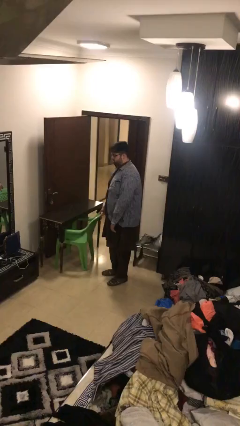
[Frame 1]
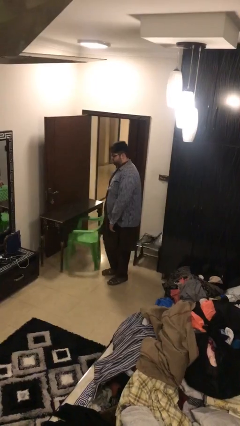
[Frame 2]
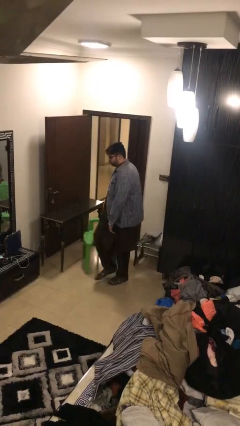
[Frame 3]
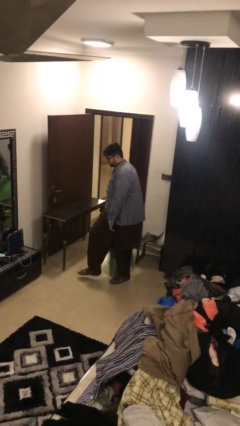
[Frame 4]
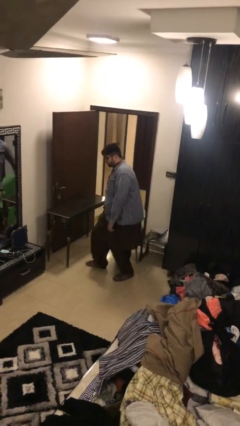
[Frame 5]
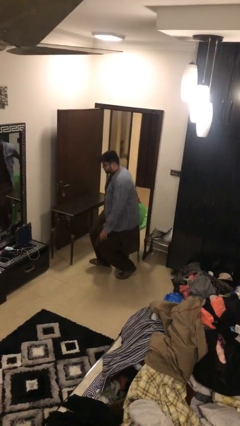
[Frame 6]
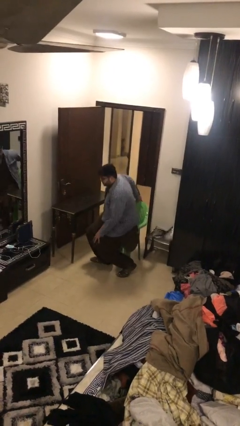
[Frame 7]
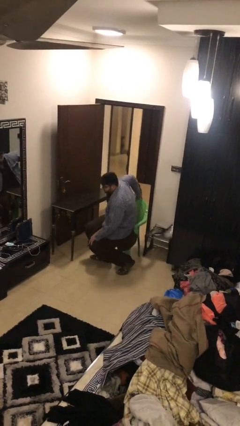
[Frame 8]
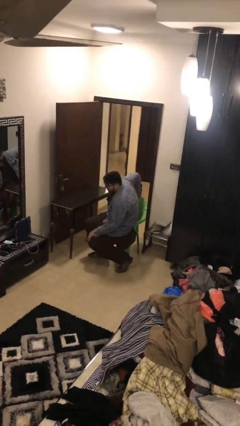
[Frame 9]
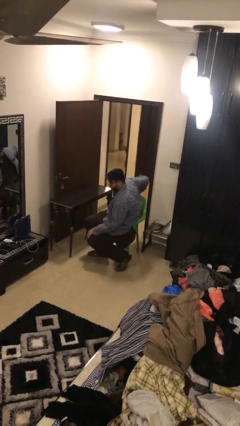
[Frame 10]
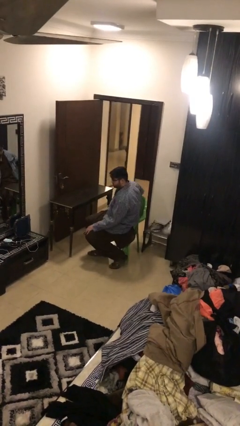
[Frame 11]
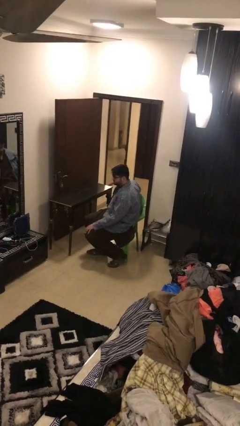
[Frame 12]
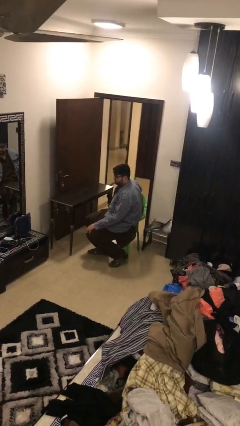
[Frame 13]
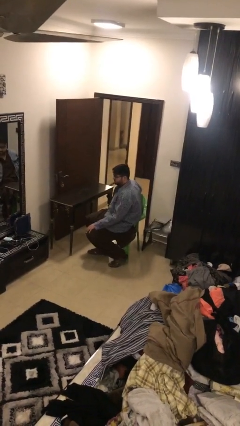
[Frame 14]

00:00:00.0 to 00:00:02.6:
person sits down

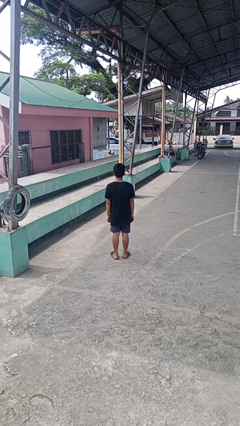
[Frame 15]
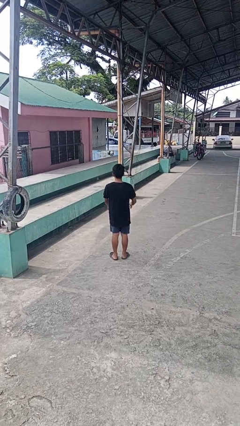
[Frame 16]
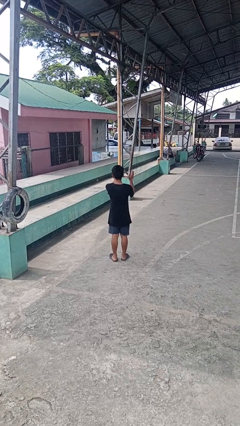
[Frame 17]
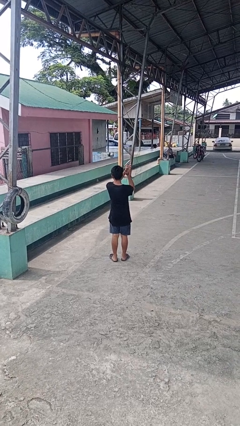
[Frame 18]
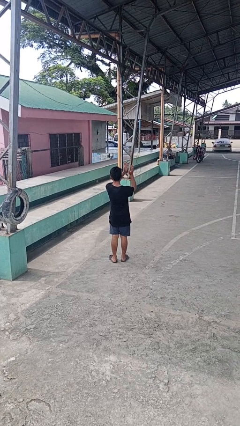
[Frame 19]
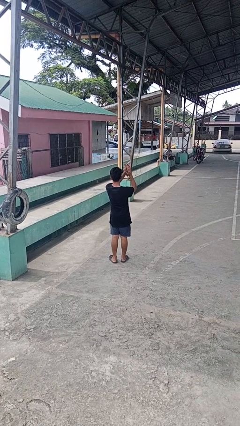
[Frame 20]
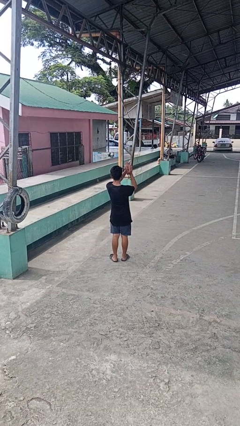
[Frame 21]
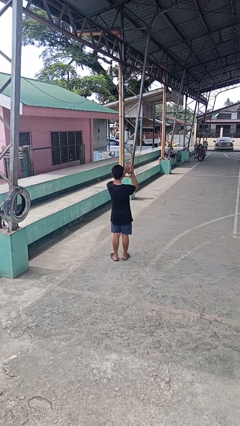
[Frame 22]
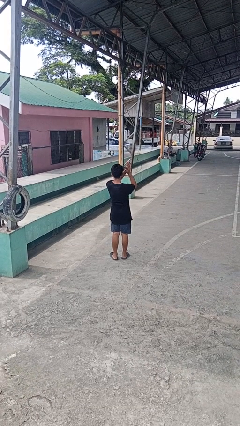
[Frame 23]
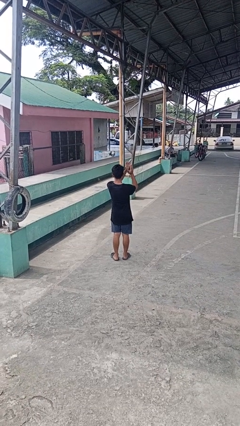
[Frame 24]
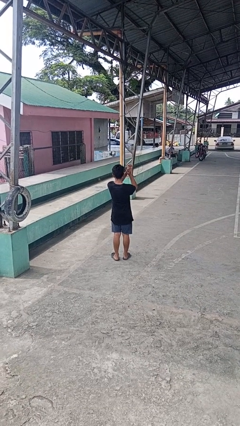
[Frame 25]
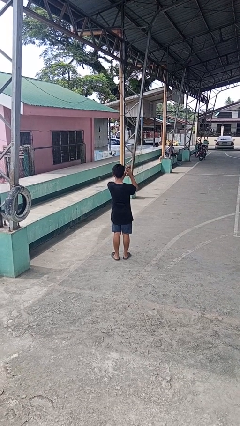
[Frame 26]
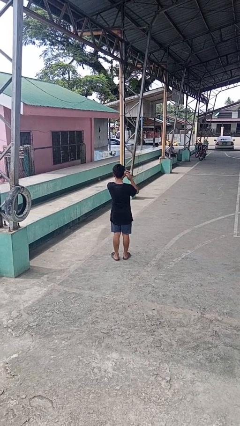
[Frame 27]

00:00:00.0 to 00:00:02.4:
person claps hands

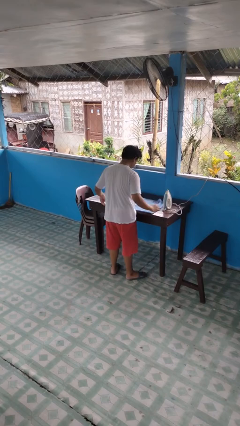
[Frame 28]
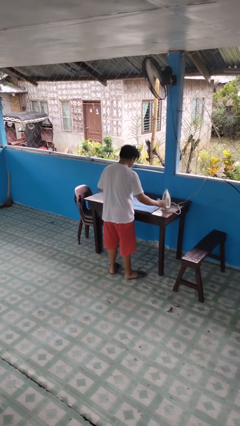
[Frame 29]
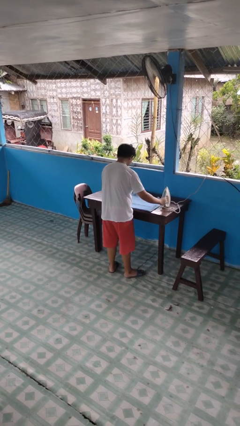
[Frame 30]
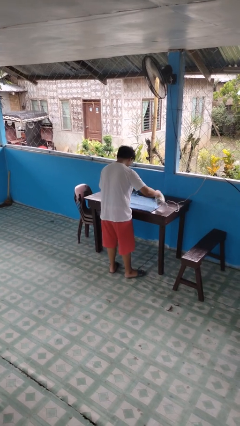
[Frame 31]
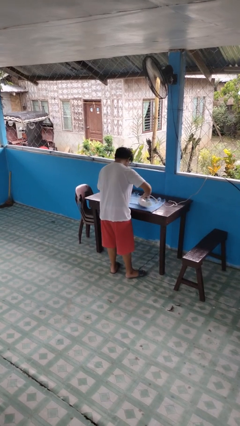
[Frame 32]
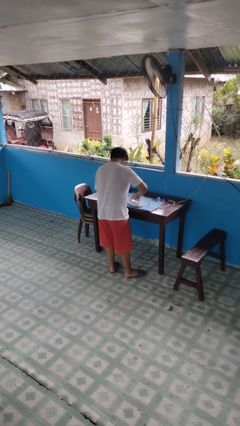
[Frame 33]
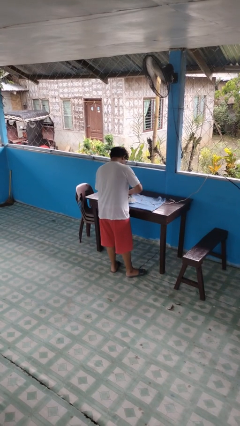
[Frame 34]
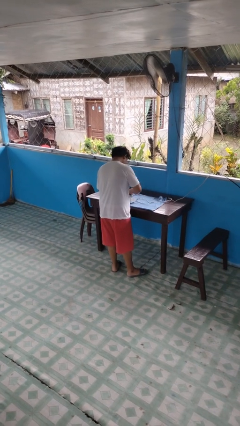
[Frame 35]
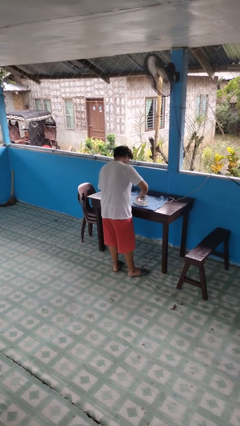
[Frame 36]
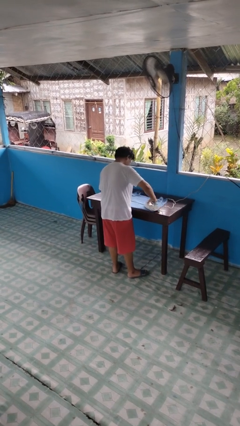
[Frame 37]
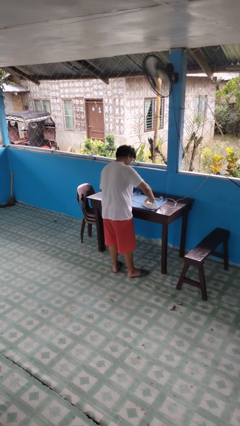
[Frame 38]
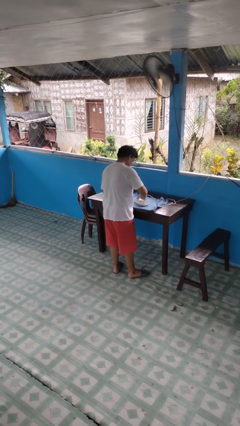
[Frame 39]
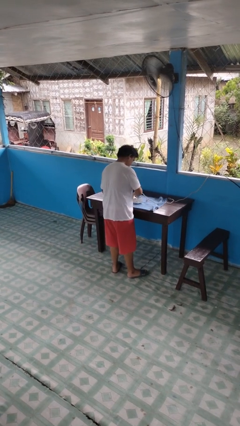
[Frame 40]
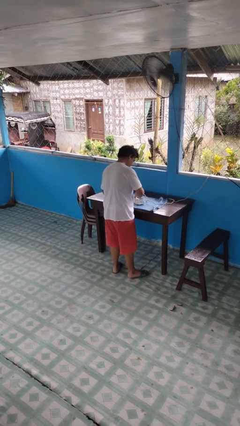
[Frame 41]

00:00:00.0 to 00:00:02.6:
person irons clothes

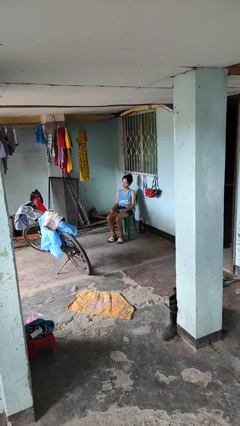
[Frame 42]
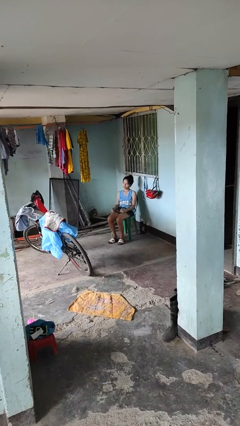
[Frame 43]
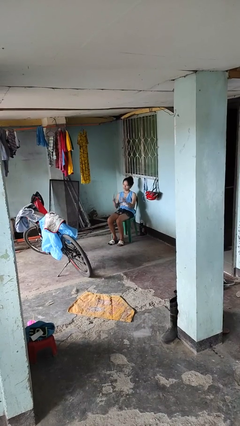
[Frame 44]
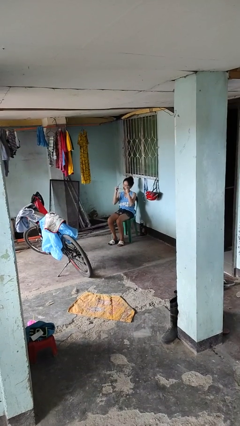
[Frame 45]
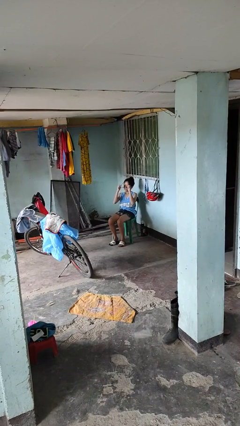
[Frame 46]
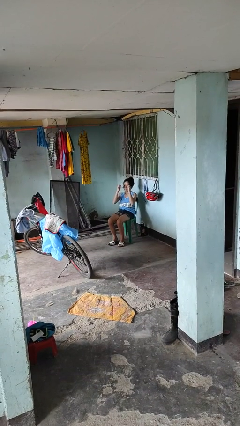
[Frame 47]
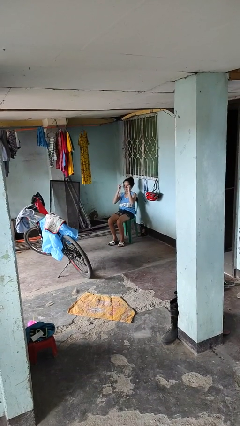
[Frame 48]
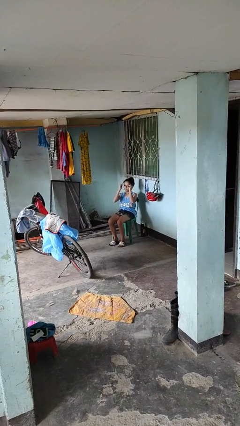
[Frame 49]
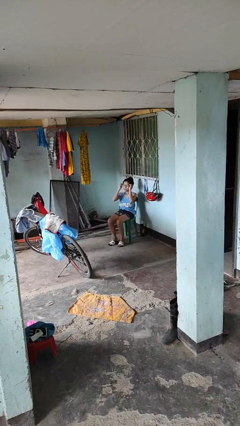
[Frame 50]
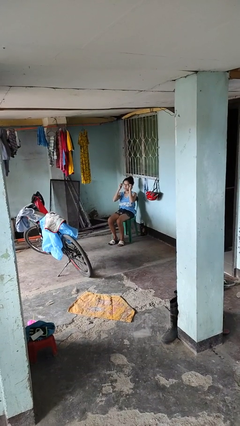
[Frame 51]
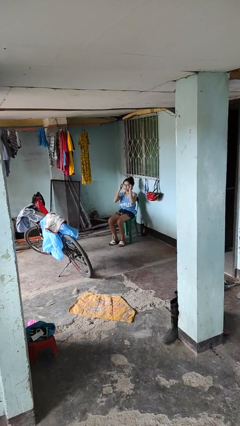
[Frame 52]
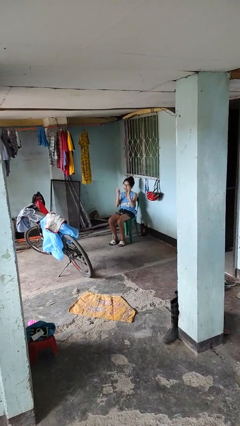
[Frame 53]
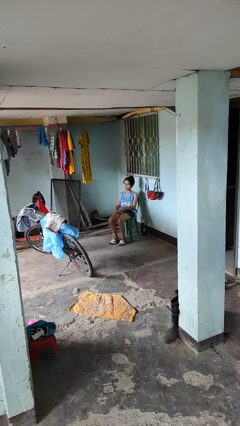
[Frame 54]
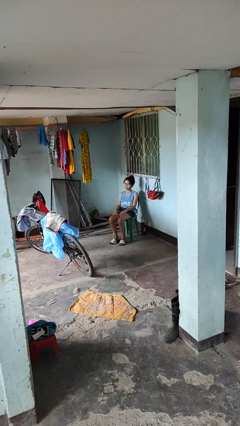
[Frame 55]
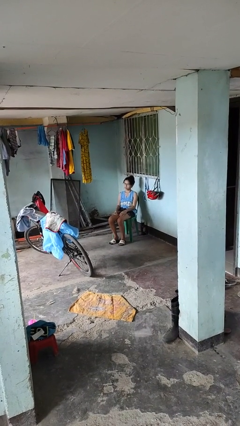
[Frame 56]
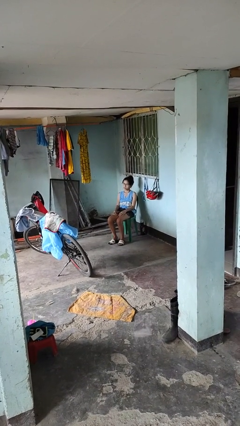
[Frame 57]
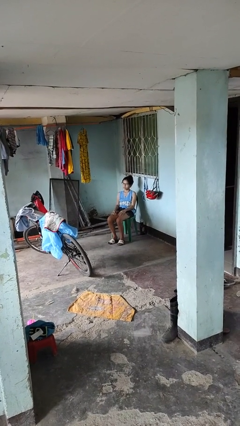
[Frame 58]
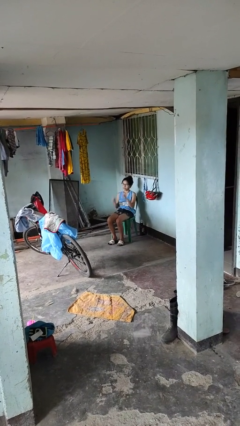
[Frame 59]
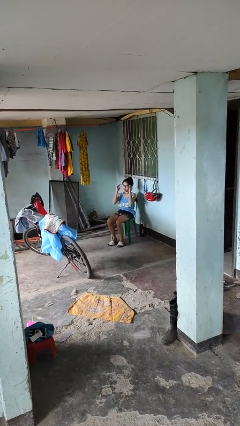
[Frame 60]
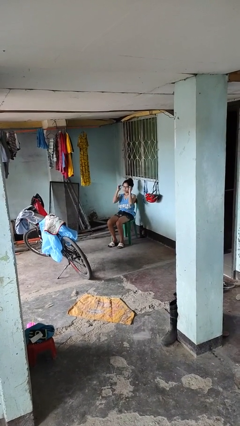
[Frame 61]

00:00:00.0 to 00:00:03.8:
person puts on glasses

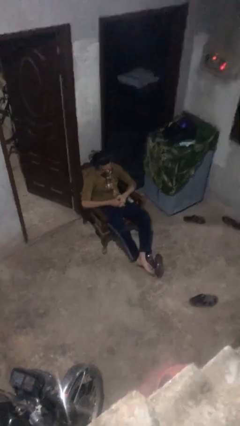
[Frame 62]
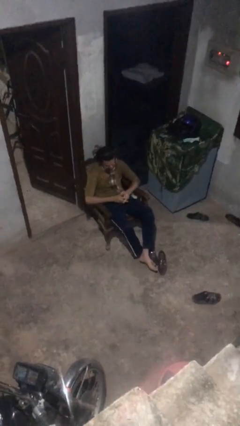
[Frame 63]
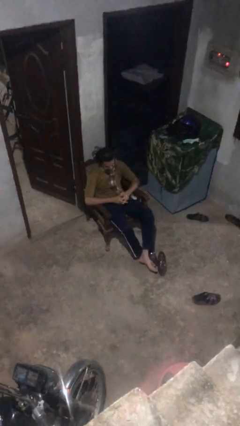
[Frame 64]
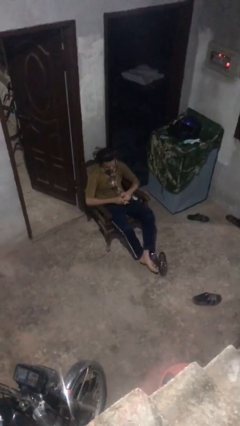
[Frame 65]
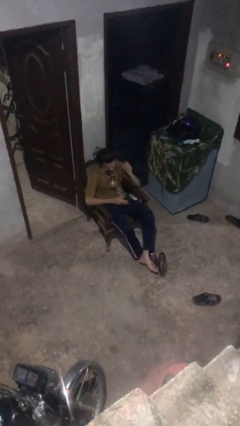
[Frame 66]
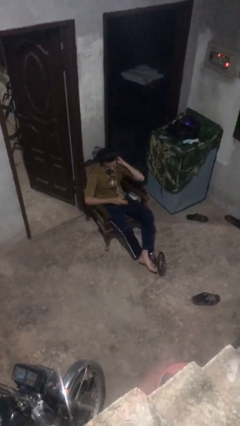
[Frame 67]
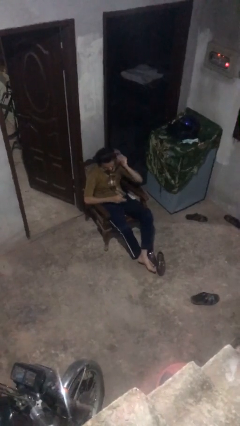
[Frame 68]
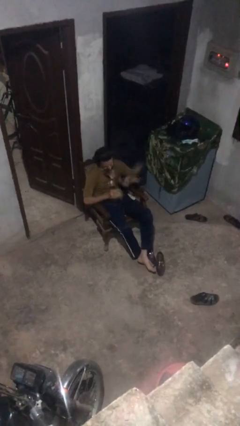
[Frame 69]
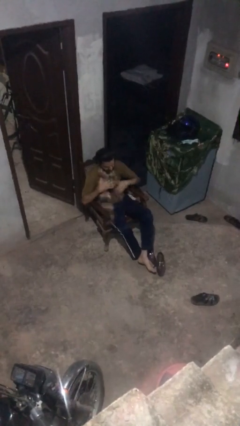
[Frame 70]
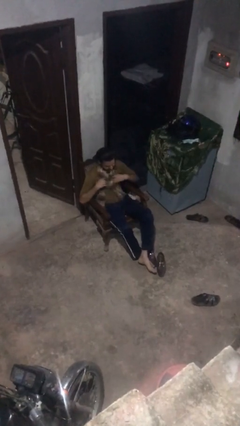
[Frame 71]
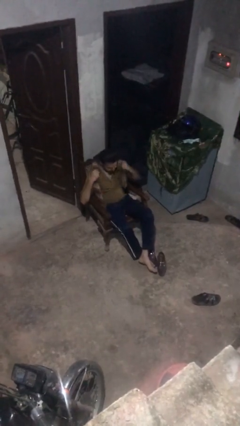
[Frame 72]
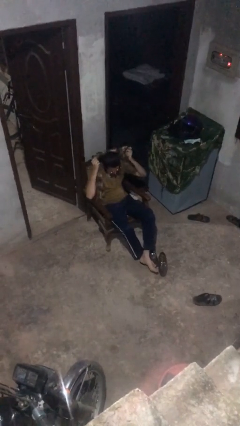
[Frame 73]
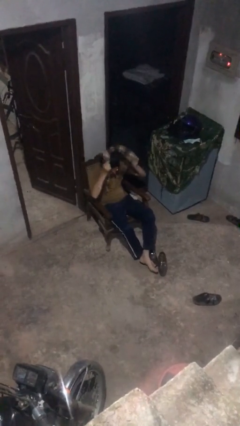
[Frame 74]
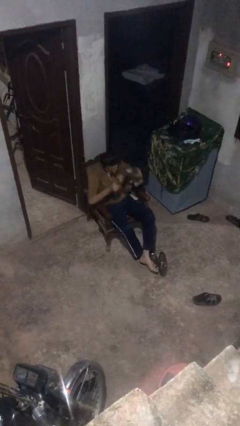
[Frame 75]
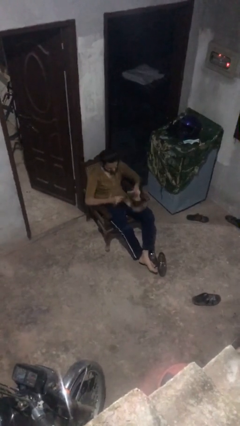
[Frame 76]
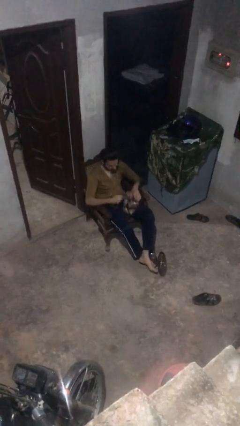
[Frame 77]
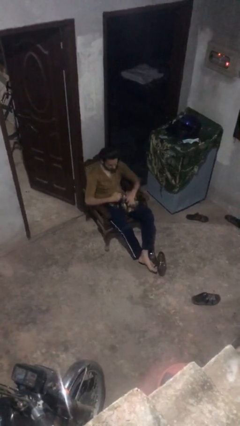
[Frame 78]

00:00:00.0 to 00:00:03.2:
person takes off scarf

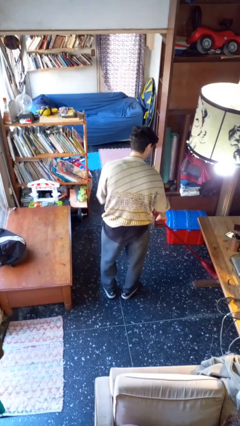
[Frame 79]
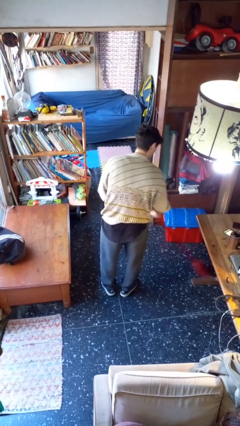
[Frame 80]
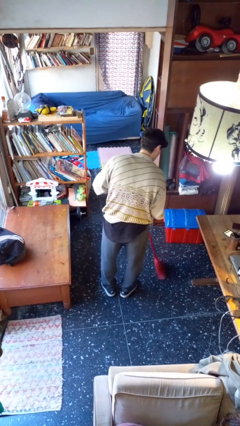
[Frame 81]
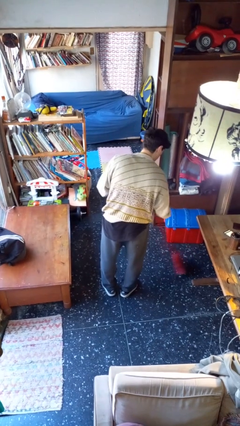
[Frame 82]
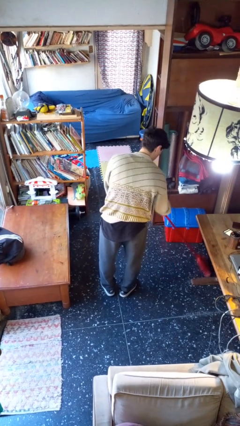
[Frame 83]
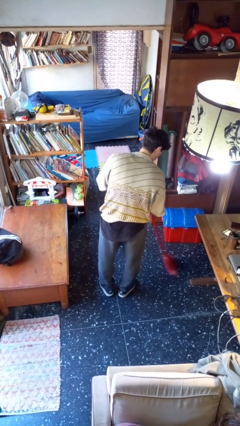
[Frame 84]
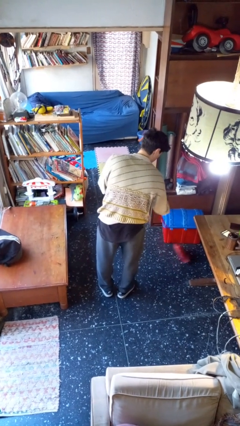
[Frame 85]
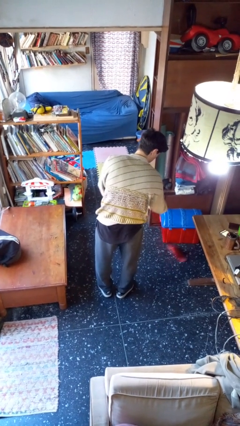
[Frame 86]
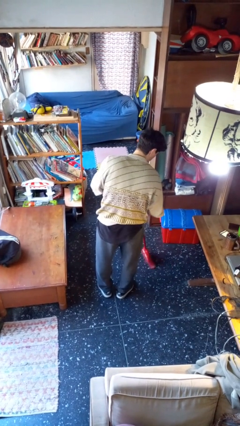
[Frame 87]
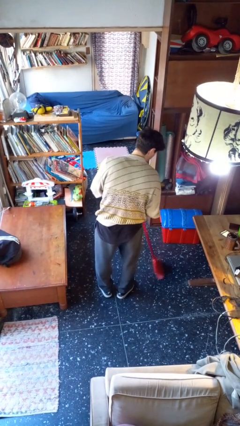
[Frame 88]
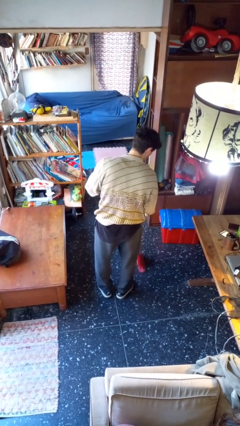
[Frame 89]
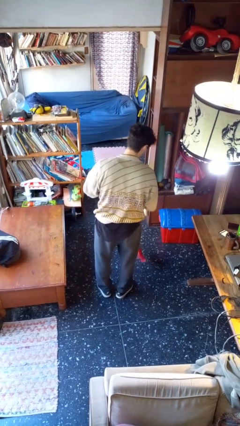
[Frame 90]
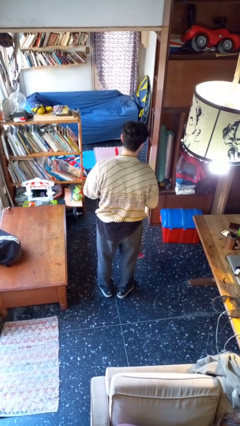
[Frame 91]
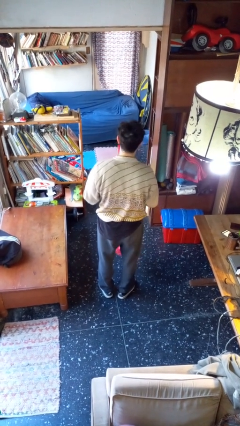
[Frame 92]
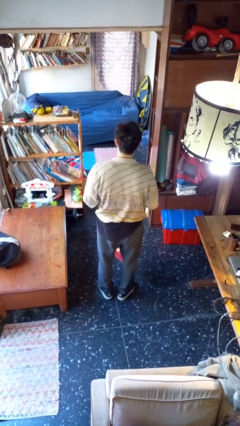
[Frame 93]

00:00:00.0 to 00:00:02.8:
person sweeps floor

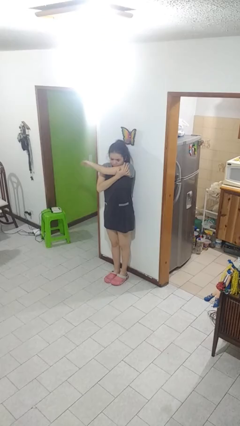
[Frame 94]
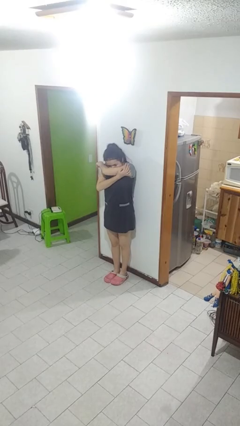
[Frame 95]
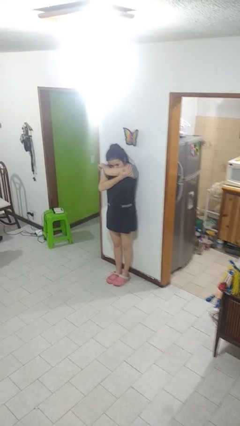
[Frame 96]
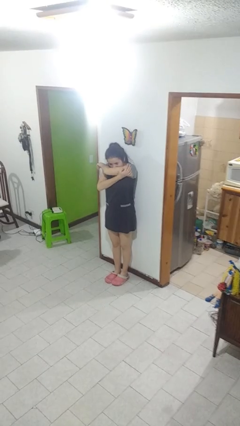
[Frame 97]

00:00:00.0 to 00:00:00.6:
person sneezes into arm
